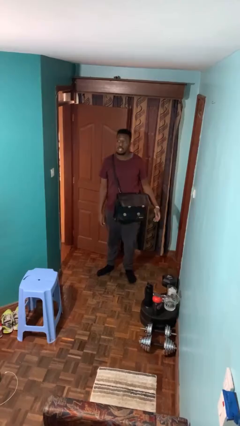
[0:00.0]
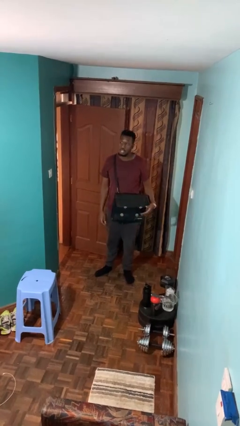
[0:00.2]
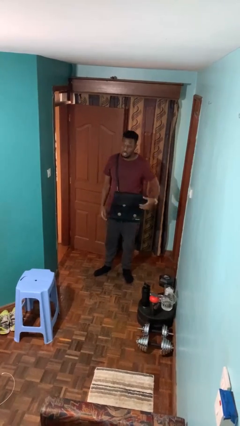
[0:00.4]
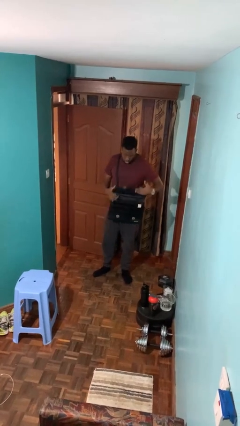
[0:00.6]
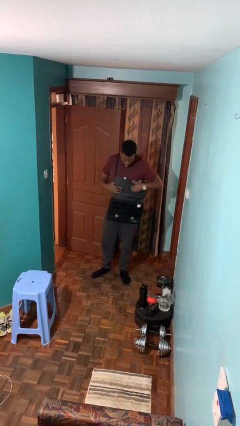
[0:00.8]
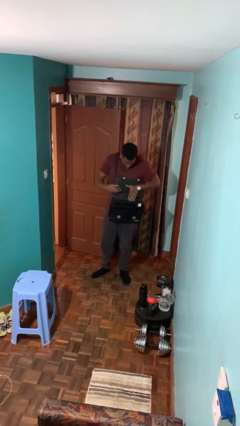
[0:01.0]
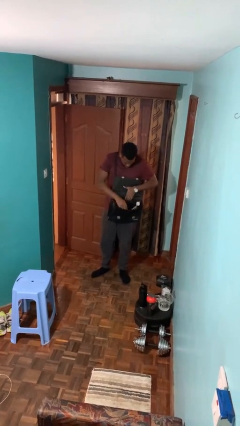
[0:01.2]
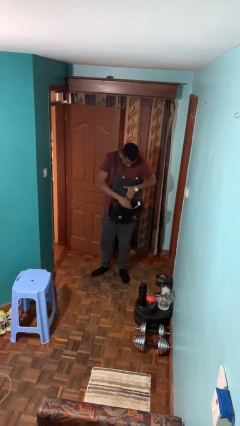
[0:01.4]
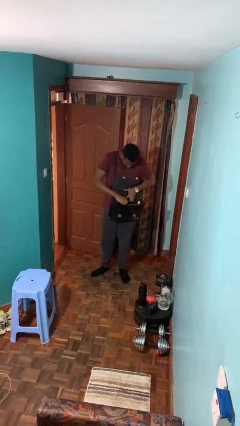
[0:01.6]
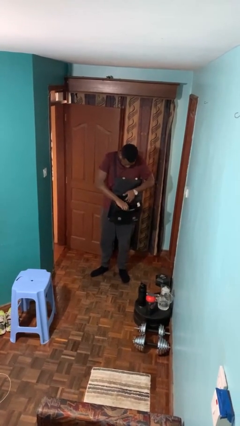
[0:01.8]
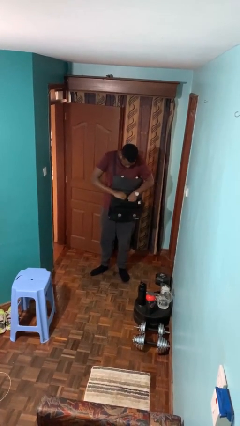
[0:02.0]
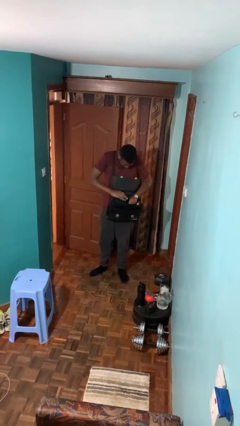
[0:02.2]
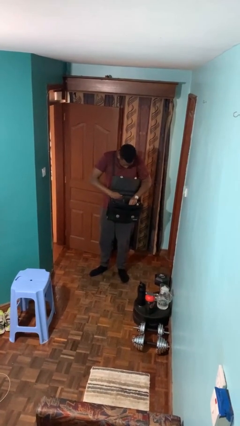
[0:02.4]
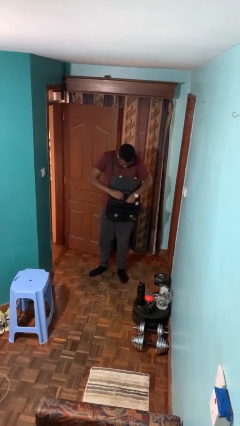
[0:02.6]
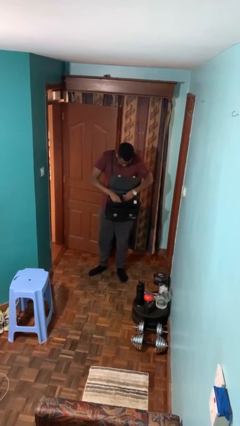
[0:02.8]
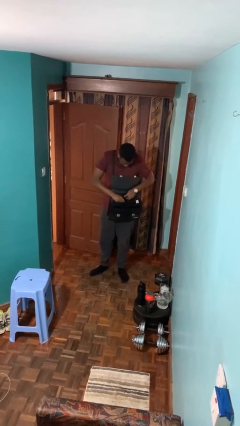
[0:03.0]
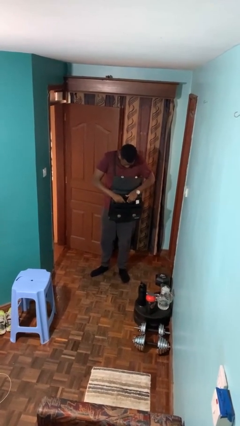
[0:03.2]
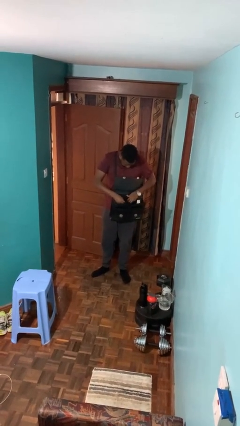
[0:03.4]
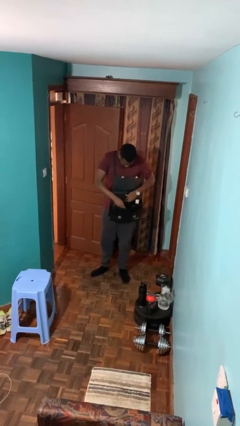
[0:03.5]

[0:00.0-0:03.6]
person searches in purse

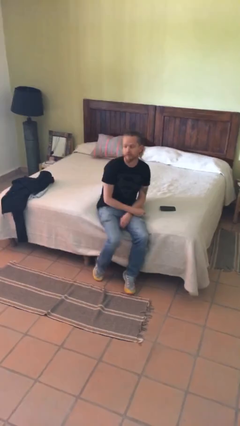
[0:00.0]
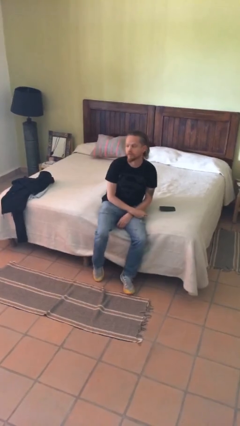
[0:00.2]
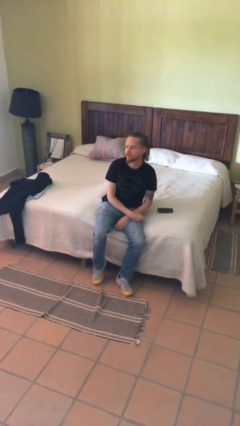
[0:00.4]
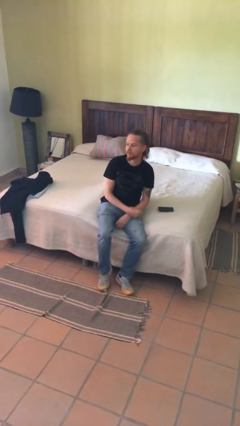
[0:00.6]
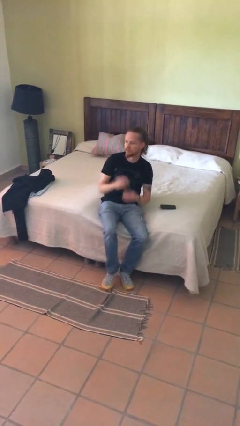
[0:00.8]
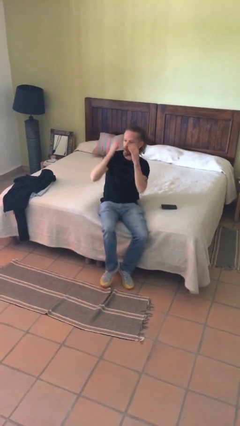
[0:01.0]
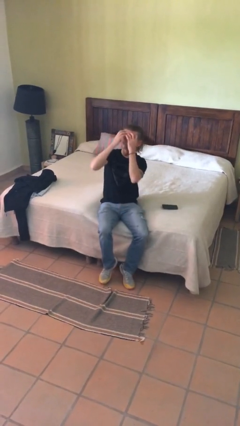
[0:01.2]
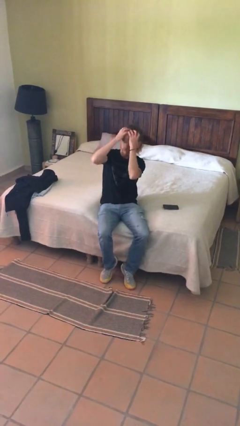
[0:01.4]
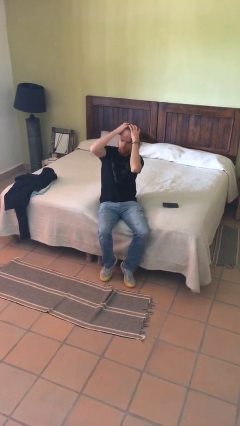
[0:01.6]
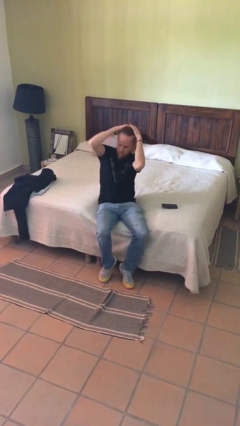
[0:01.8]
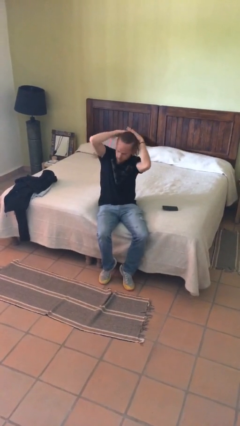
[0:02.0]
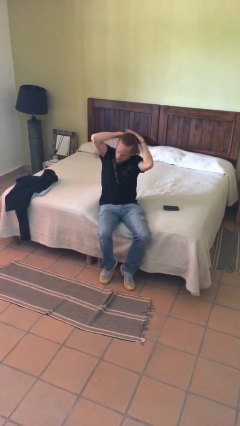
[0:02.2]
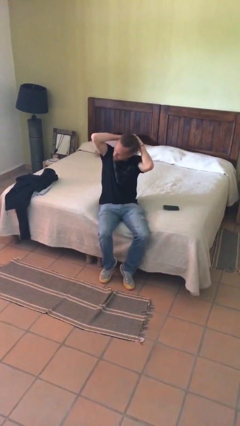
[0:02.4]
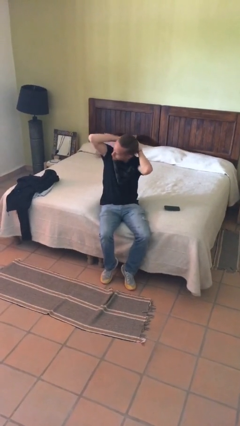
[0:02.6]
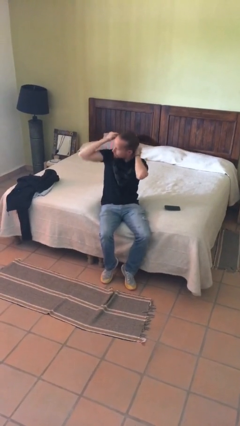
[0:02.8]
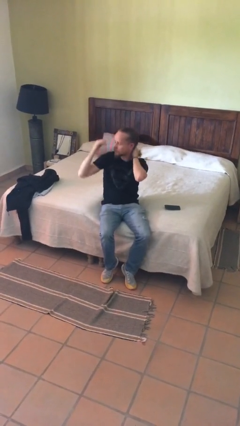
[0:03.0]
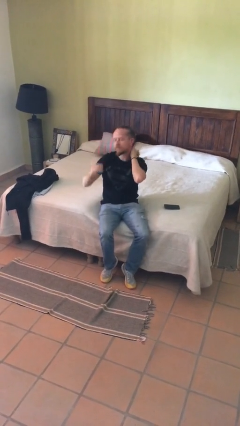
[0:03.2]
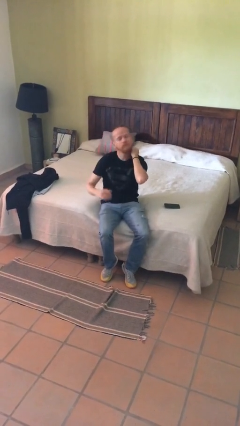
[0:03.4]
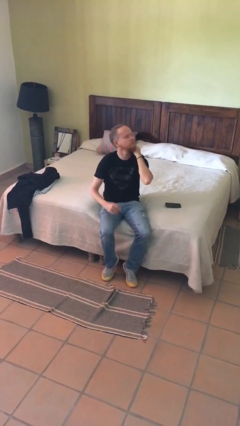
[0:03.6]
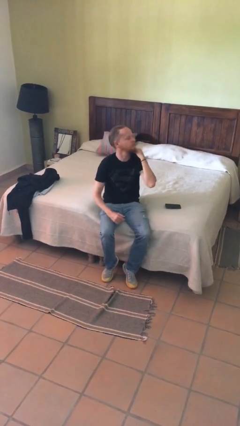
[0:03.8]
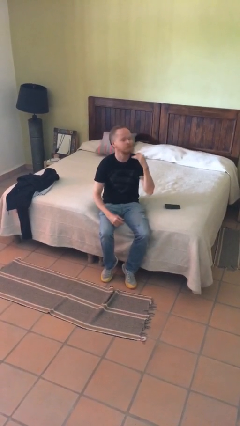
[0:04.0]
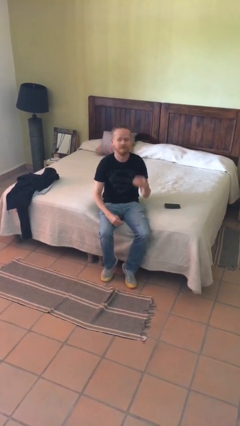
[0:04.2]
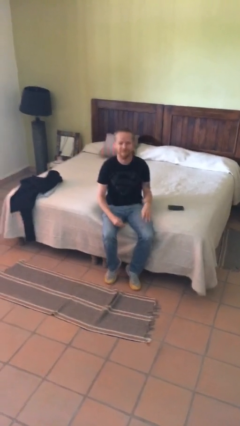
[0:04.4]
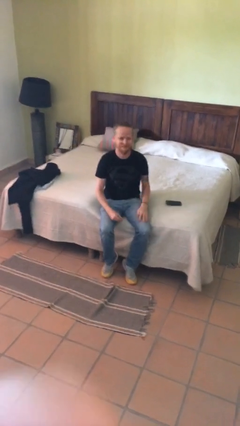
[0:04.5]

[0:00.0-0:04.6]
person strokes hair

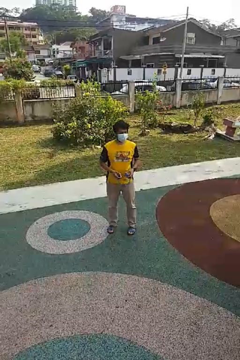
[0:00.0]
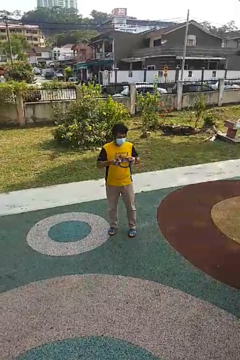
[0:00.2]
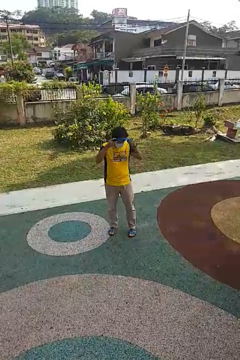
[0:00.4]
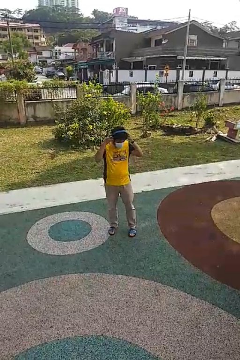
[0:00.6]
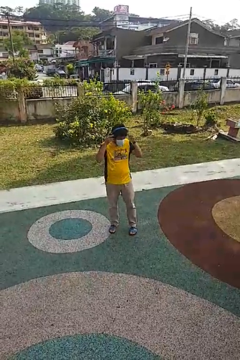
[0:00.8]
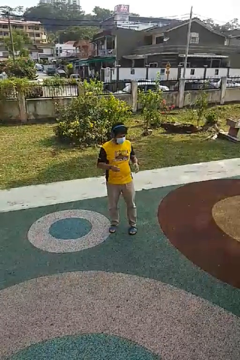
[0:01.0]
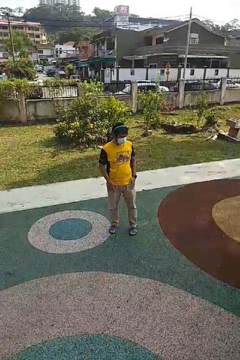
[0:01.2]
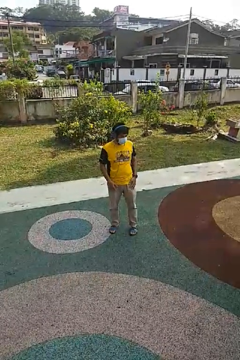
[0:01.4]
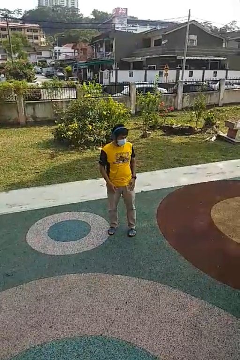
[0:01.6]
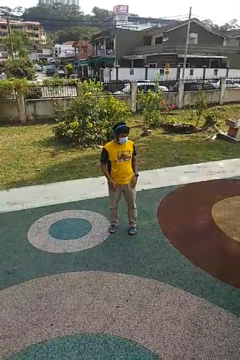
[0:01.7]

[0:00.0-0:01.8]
person puts on headphones

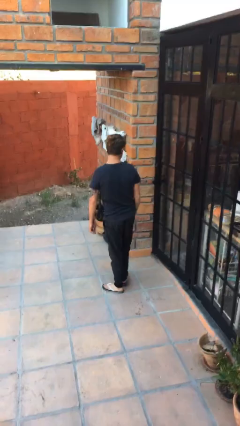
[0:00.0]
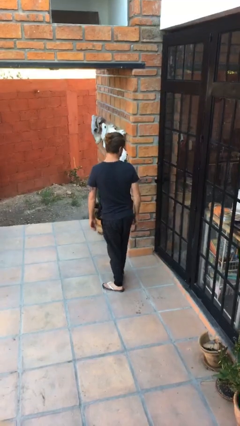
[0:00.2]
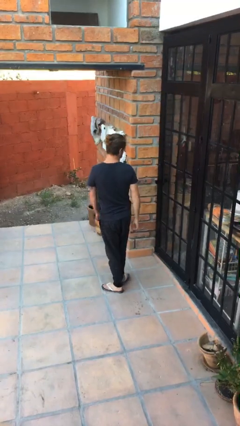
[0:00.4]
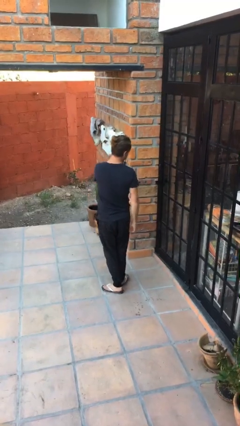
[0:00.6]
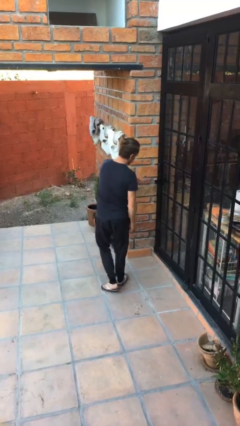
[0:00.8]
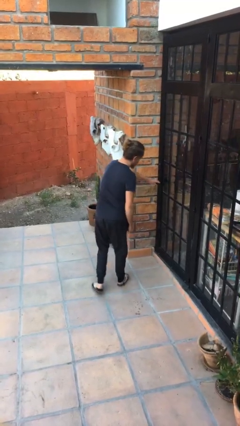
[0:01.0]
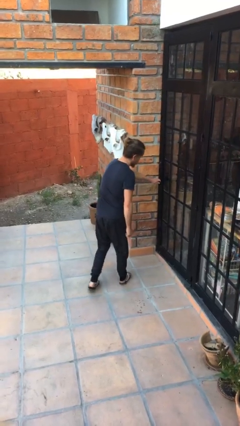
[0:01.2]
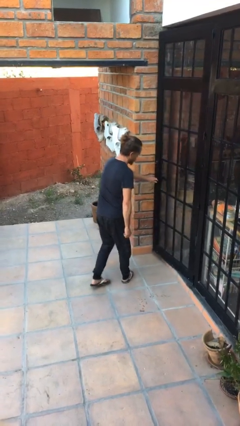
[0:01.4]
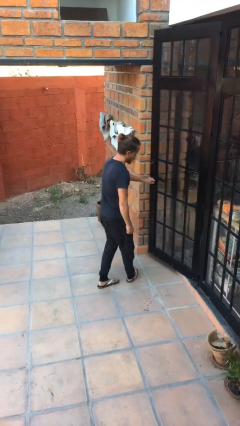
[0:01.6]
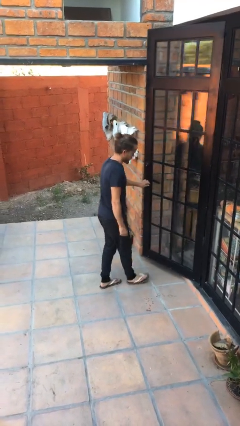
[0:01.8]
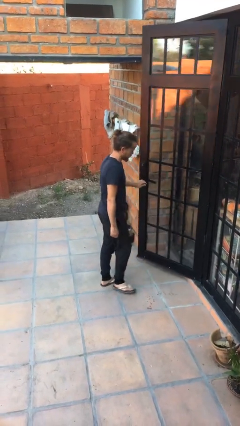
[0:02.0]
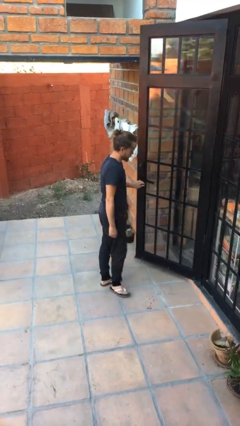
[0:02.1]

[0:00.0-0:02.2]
person opens facility door

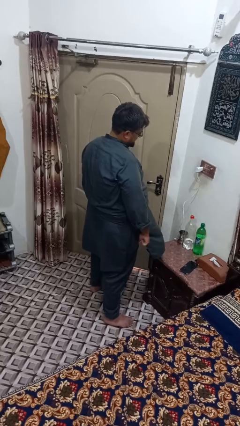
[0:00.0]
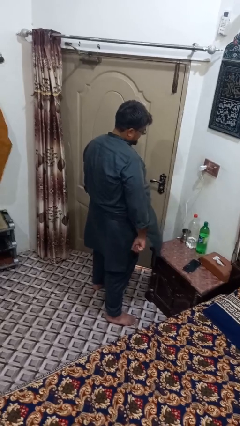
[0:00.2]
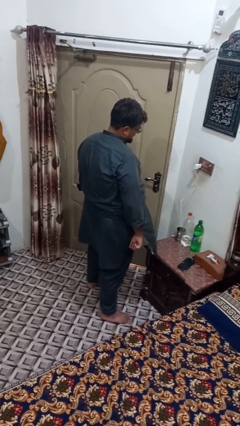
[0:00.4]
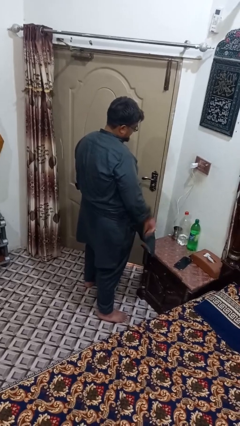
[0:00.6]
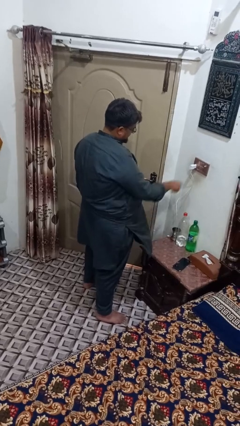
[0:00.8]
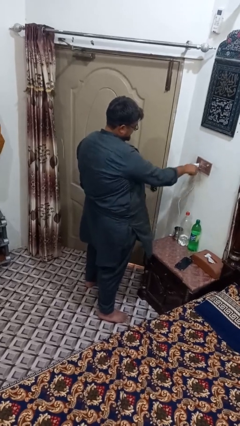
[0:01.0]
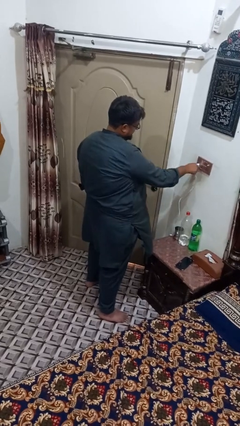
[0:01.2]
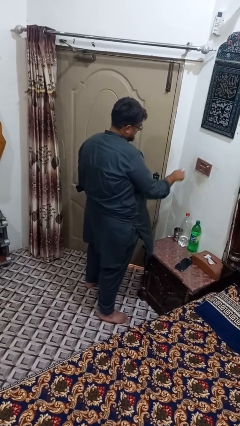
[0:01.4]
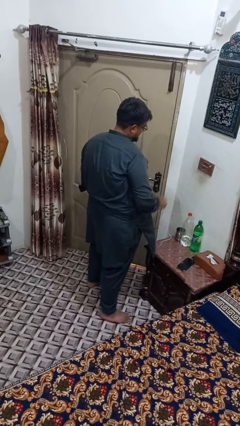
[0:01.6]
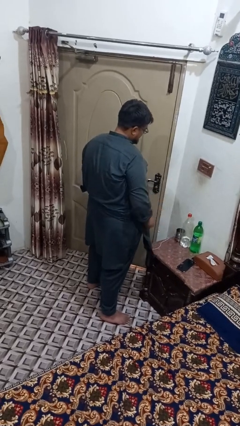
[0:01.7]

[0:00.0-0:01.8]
person unplugs from electrical socket

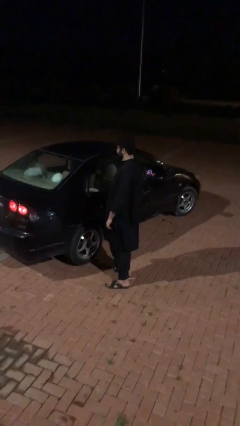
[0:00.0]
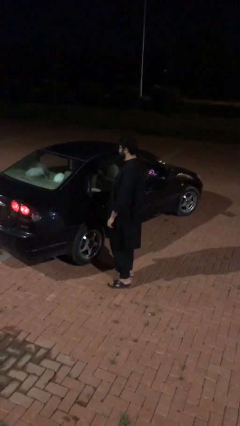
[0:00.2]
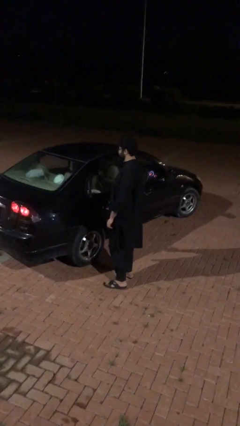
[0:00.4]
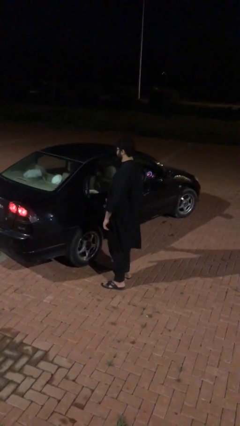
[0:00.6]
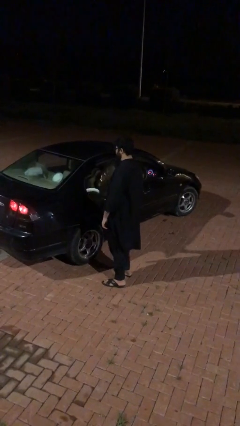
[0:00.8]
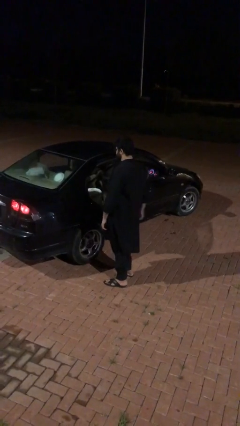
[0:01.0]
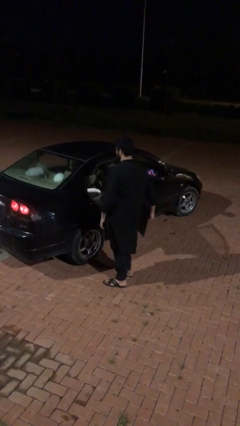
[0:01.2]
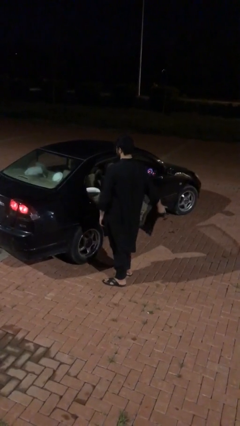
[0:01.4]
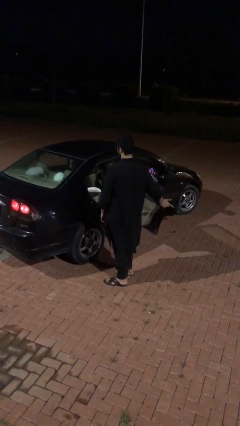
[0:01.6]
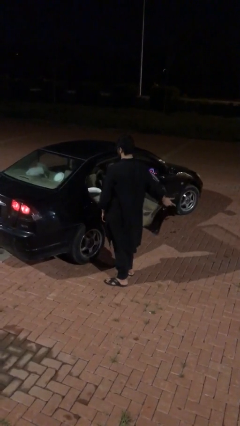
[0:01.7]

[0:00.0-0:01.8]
person opens car door

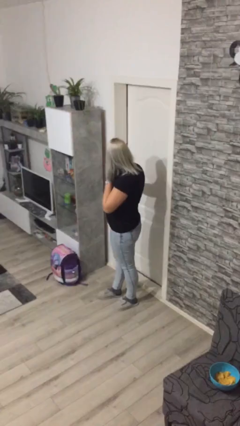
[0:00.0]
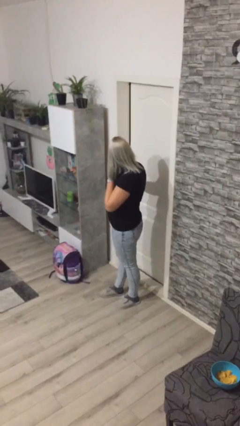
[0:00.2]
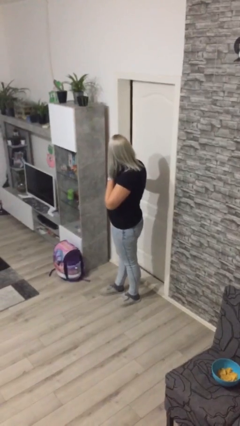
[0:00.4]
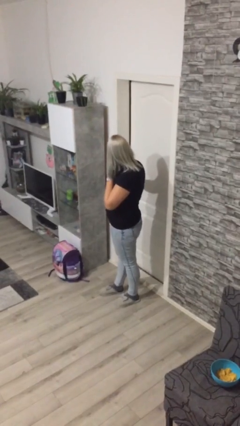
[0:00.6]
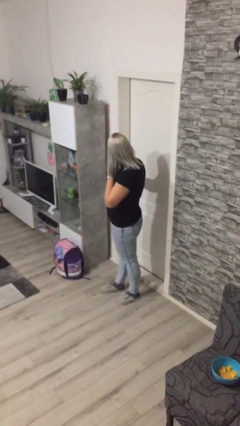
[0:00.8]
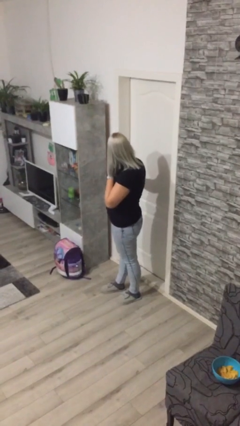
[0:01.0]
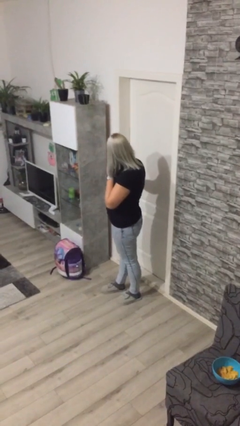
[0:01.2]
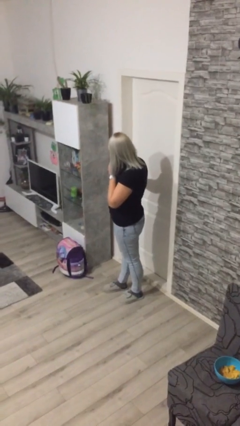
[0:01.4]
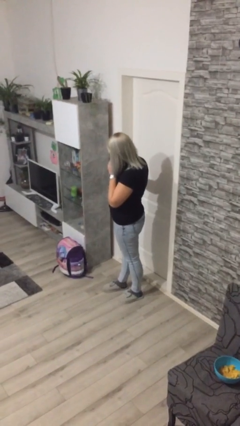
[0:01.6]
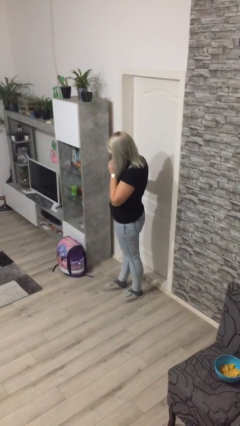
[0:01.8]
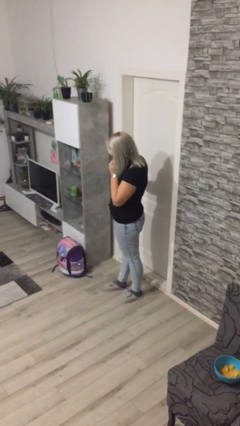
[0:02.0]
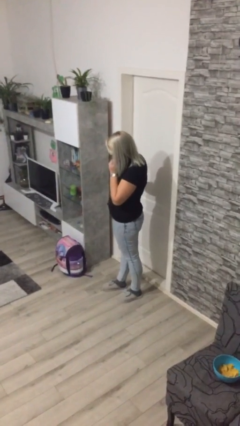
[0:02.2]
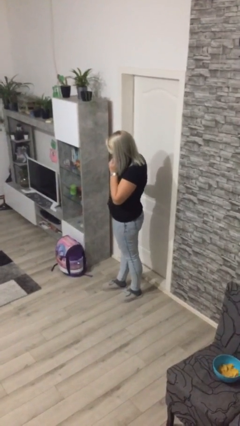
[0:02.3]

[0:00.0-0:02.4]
person closes facility door
